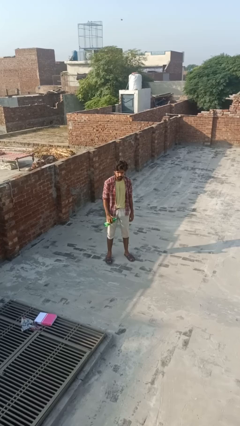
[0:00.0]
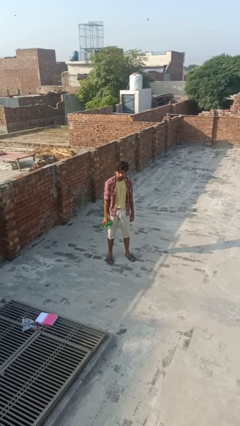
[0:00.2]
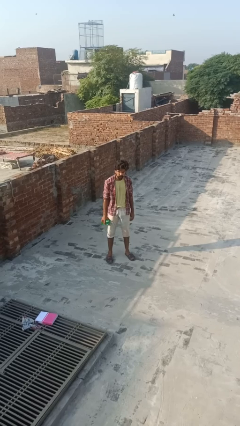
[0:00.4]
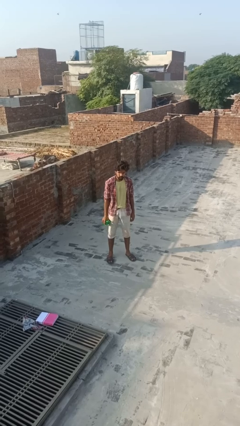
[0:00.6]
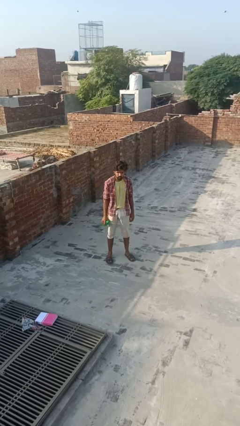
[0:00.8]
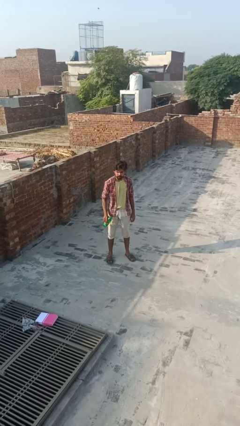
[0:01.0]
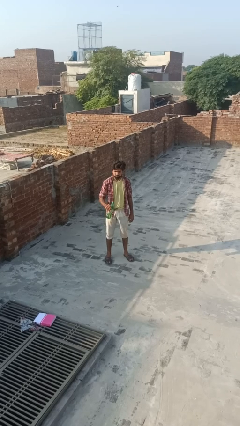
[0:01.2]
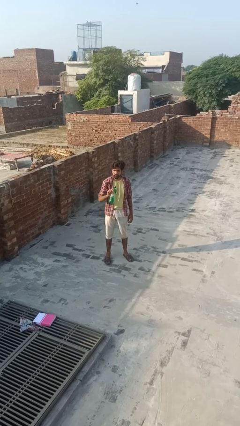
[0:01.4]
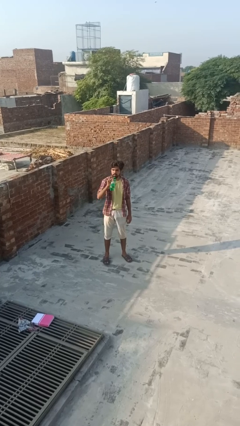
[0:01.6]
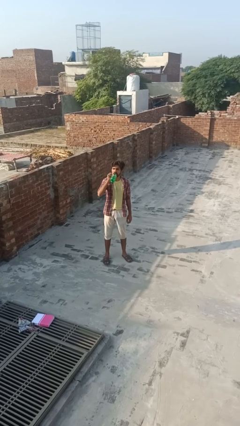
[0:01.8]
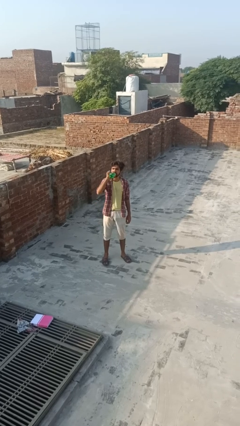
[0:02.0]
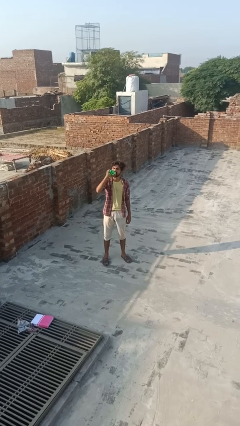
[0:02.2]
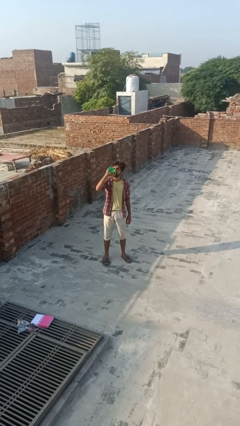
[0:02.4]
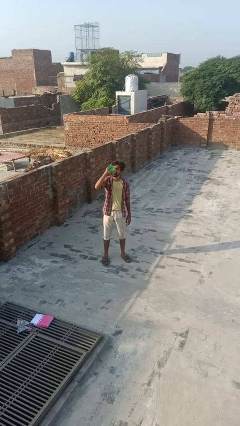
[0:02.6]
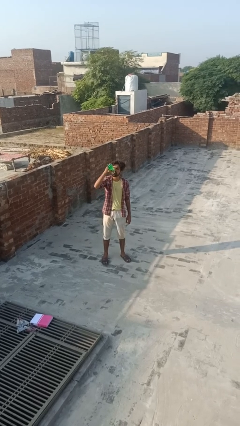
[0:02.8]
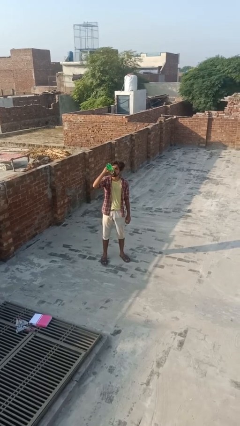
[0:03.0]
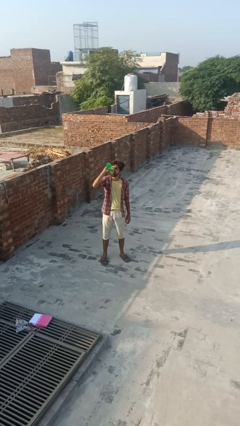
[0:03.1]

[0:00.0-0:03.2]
person drinks from bottle

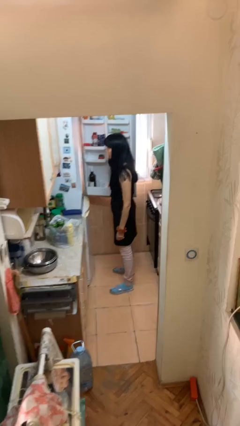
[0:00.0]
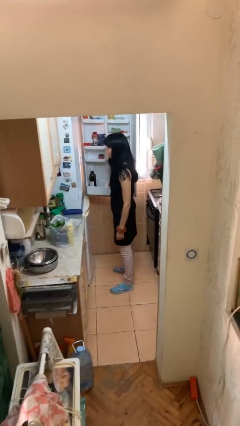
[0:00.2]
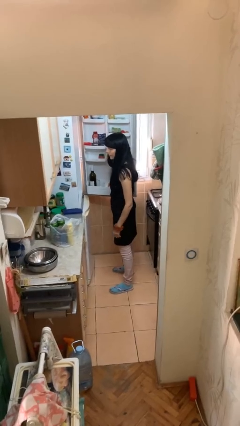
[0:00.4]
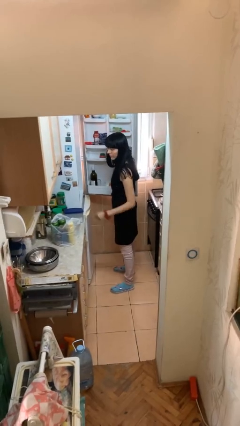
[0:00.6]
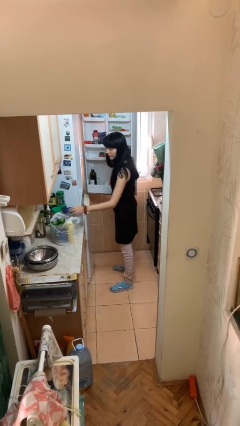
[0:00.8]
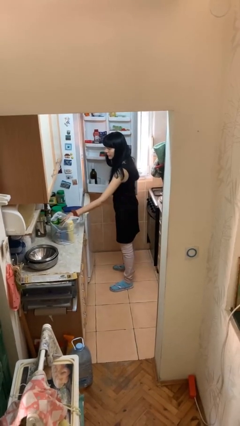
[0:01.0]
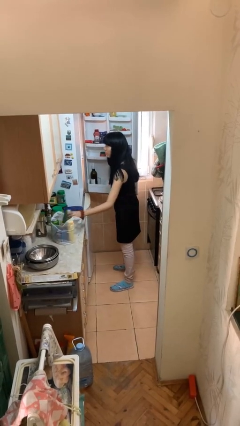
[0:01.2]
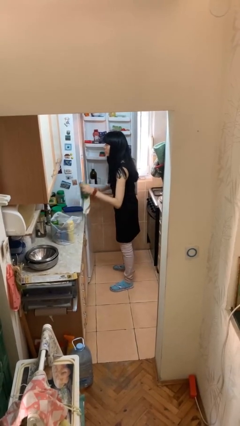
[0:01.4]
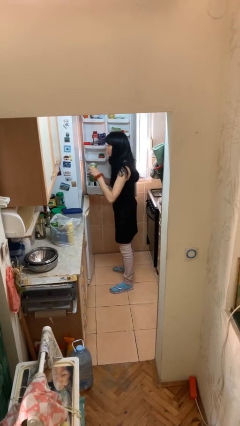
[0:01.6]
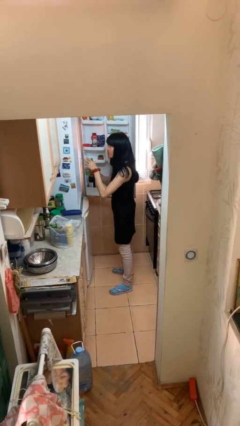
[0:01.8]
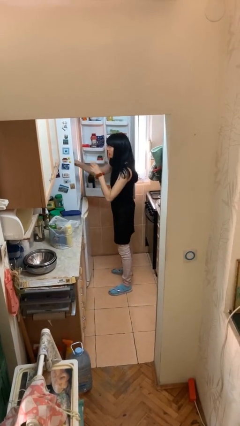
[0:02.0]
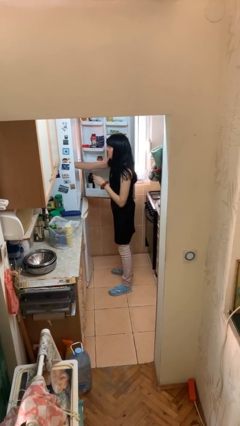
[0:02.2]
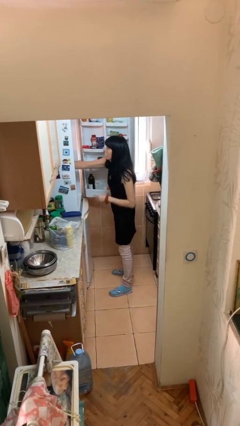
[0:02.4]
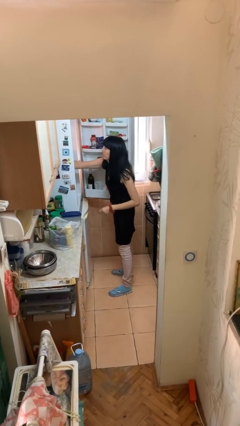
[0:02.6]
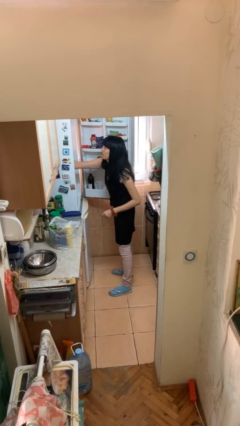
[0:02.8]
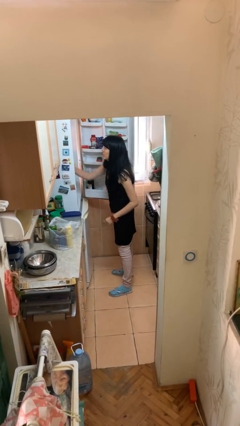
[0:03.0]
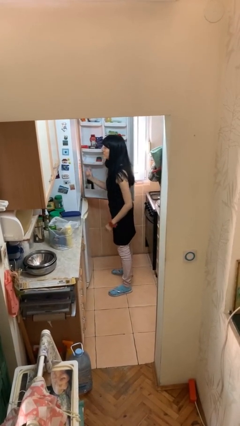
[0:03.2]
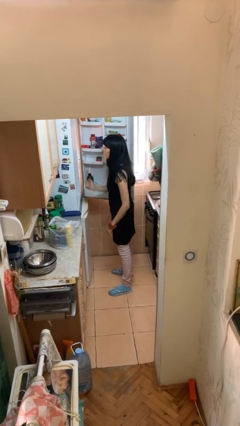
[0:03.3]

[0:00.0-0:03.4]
person loads groceries into refrigerator

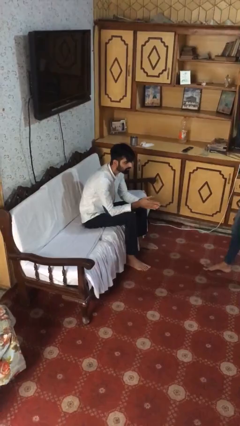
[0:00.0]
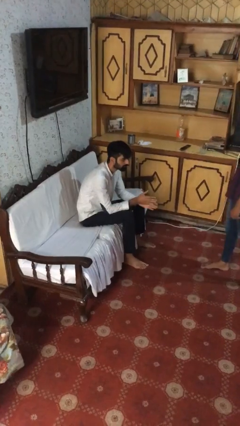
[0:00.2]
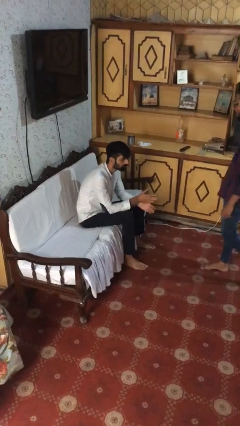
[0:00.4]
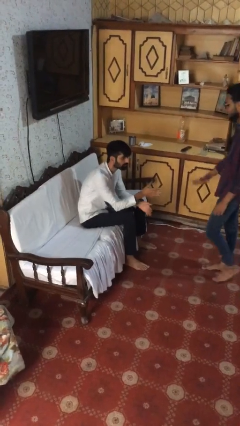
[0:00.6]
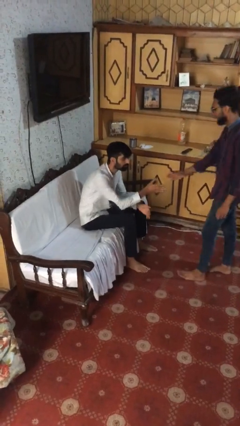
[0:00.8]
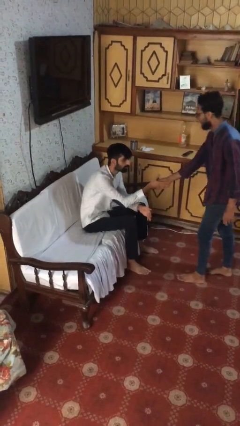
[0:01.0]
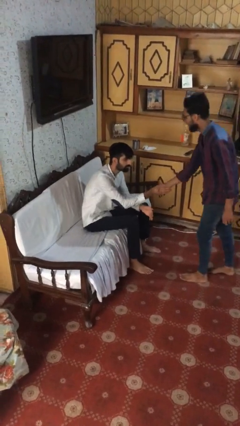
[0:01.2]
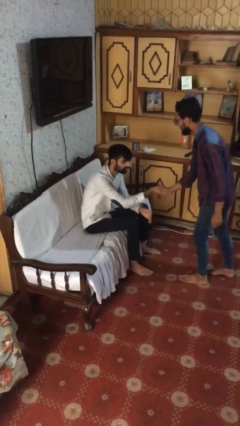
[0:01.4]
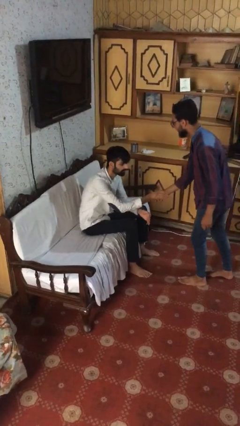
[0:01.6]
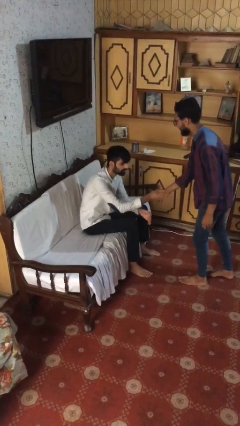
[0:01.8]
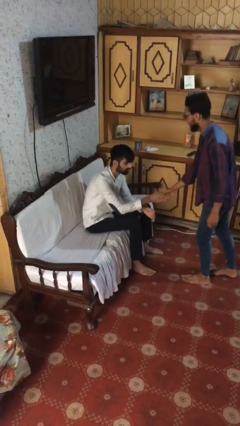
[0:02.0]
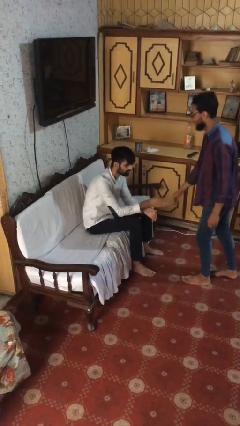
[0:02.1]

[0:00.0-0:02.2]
person shakes hand

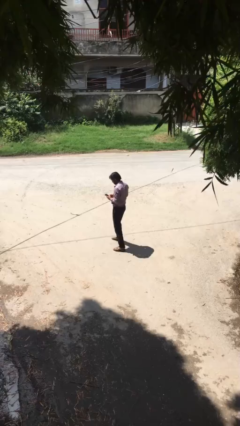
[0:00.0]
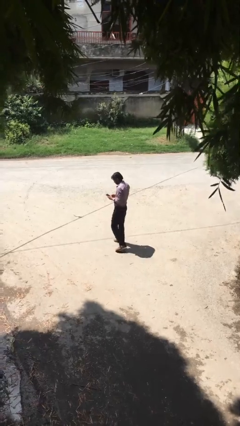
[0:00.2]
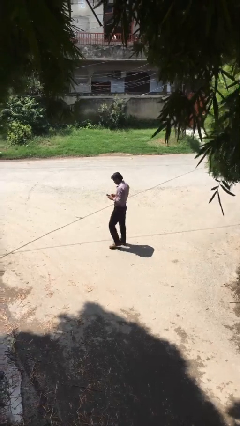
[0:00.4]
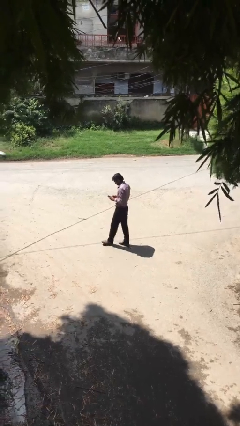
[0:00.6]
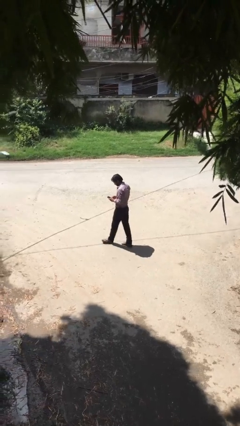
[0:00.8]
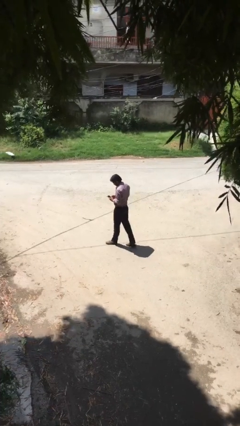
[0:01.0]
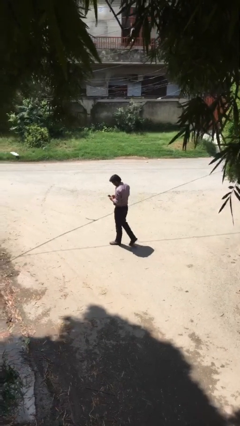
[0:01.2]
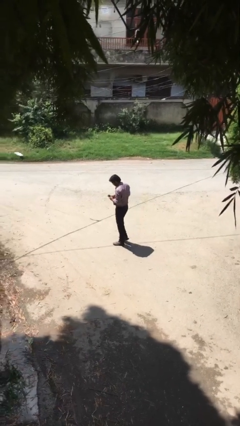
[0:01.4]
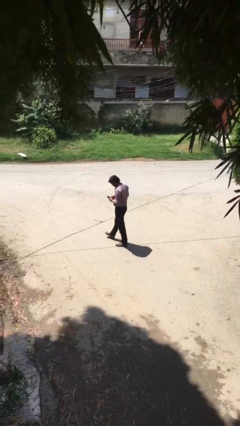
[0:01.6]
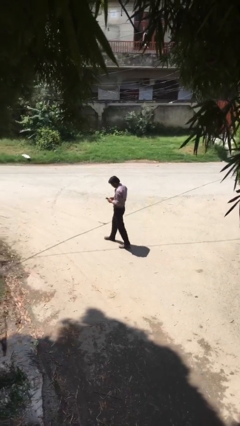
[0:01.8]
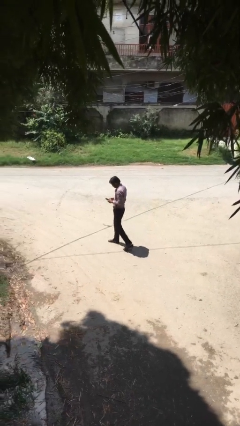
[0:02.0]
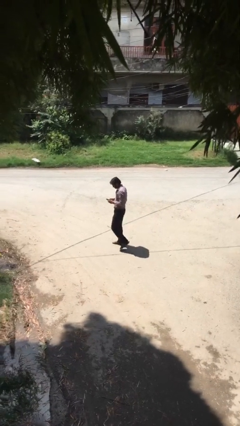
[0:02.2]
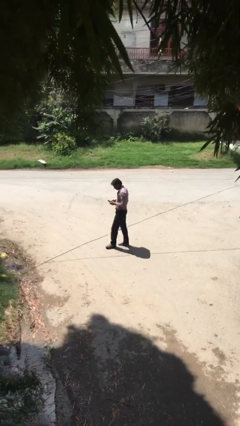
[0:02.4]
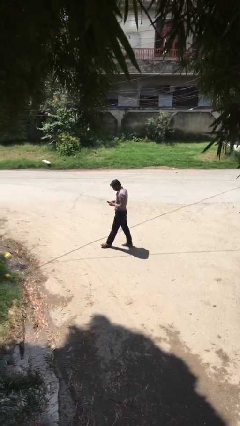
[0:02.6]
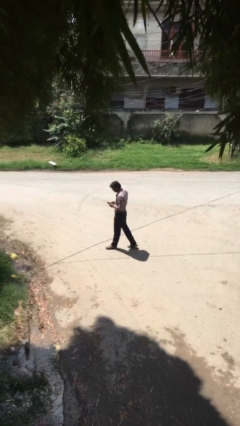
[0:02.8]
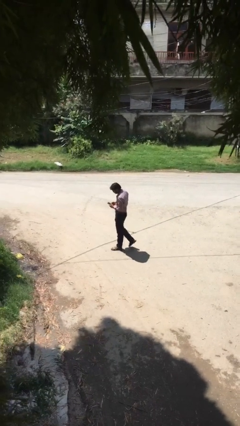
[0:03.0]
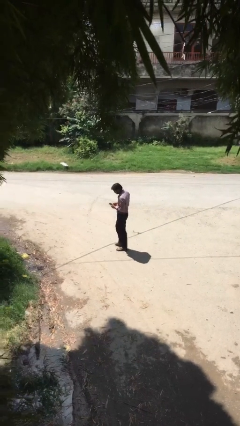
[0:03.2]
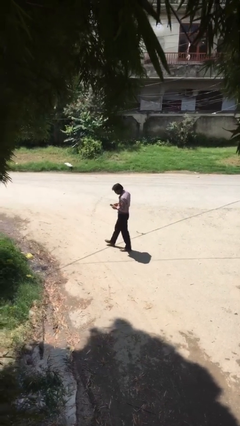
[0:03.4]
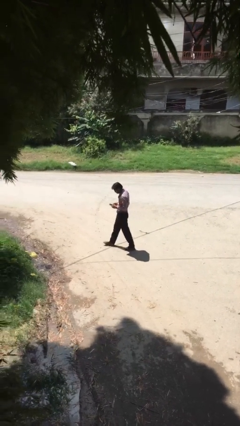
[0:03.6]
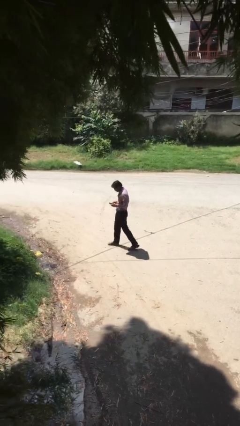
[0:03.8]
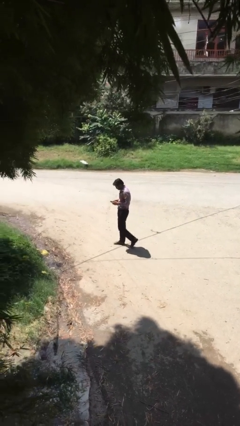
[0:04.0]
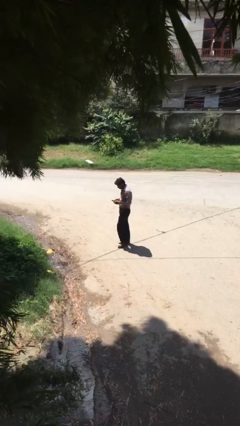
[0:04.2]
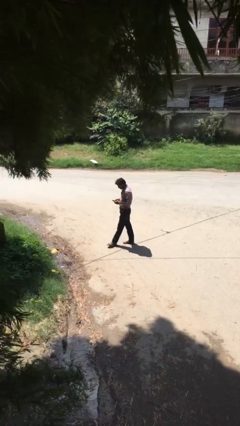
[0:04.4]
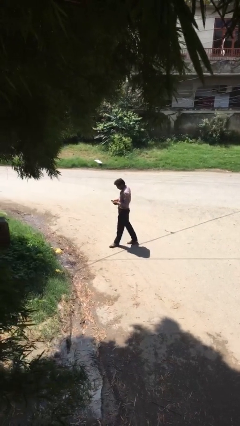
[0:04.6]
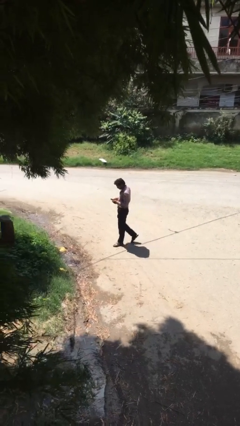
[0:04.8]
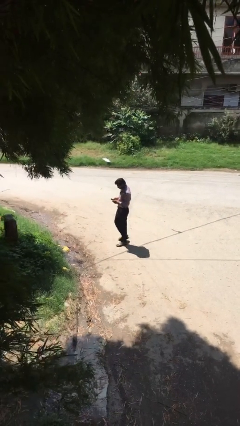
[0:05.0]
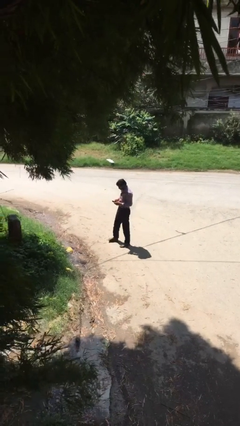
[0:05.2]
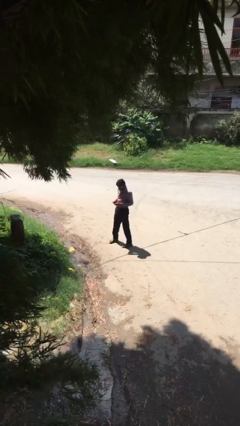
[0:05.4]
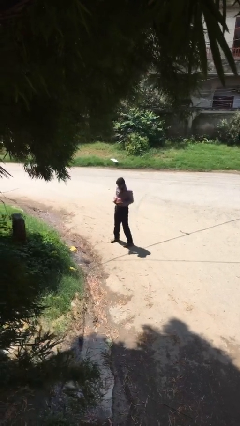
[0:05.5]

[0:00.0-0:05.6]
person texts on phone

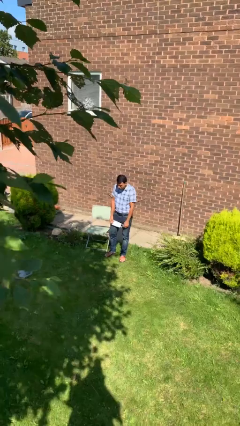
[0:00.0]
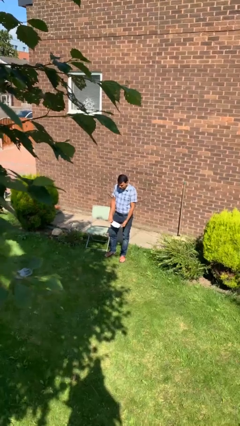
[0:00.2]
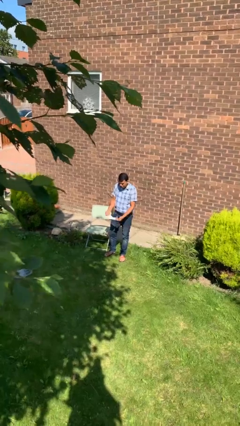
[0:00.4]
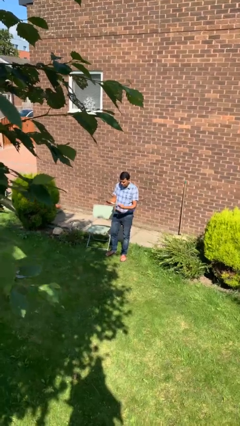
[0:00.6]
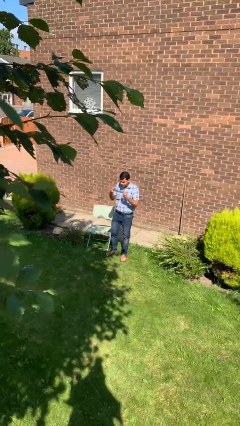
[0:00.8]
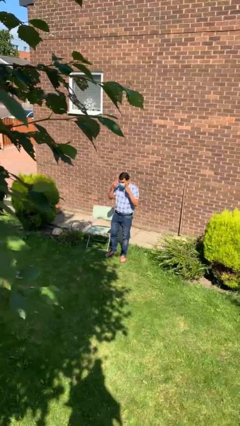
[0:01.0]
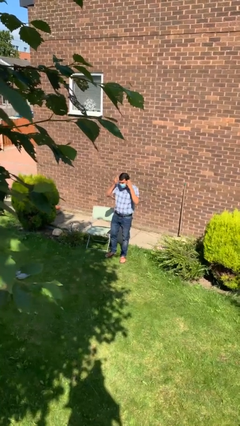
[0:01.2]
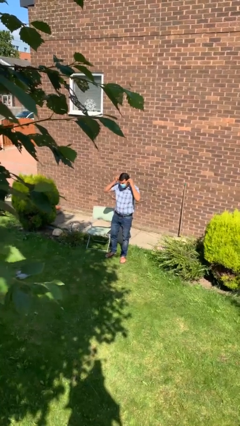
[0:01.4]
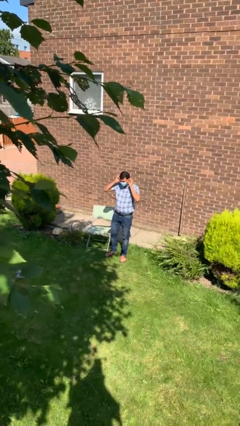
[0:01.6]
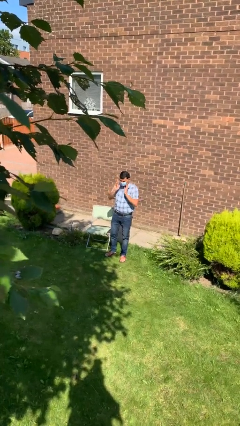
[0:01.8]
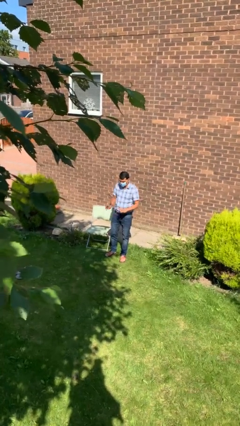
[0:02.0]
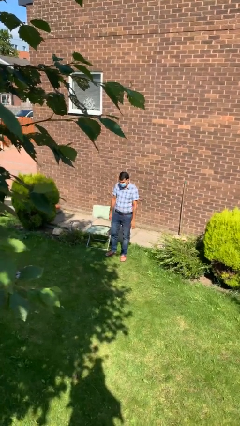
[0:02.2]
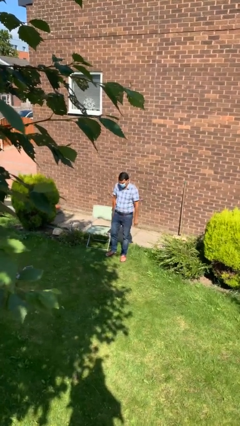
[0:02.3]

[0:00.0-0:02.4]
person puts on facemask

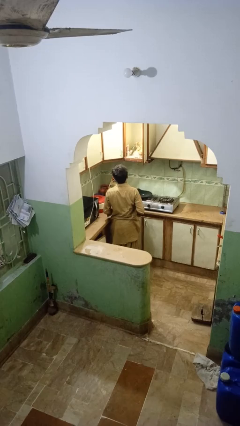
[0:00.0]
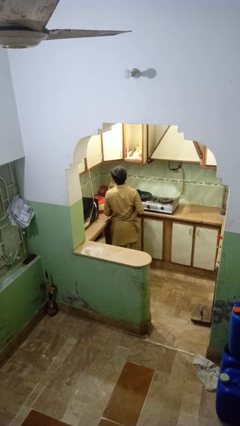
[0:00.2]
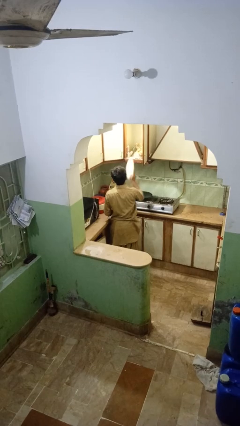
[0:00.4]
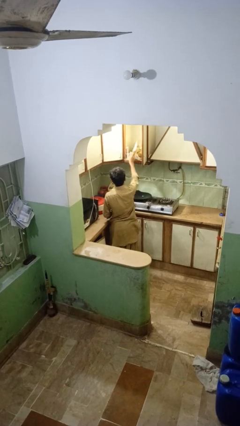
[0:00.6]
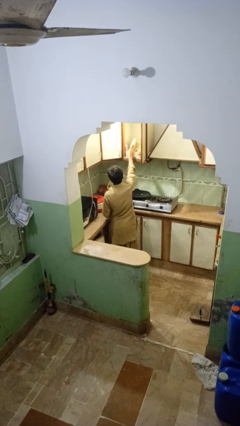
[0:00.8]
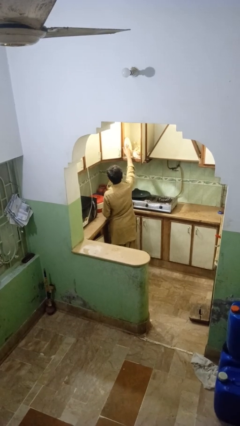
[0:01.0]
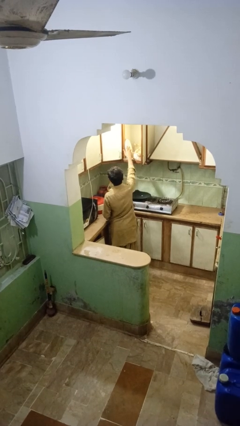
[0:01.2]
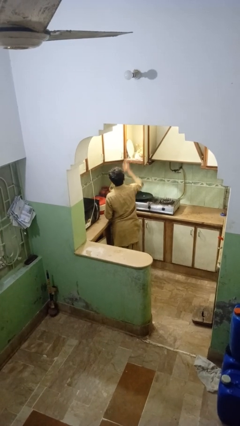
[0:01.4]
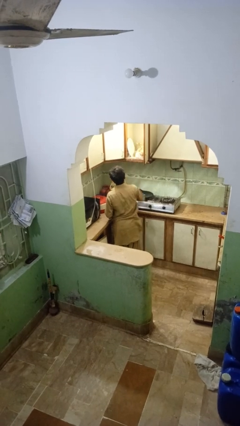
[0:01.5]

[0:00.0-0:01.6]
person puts object in cabinet
